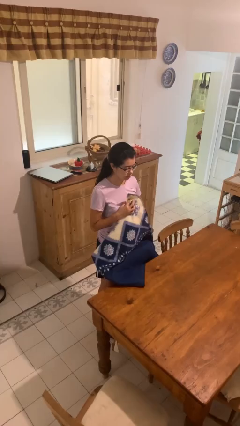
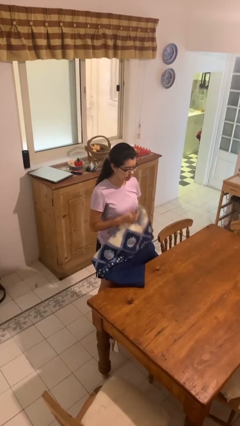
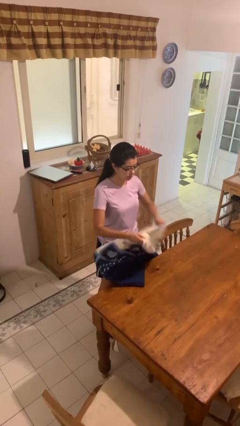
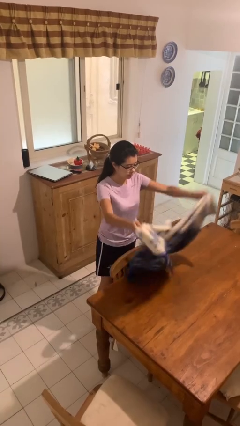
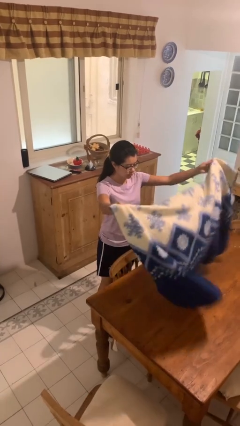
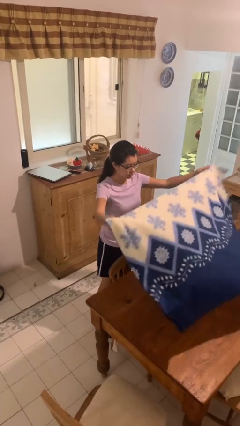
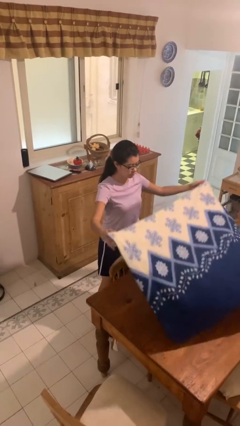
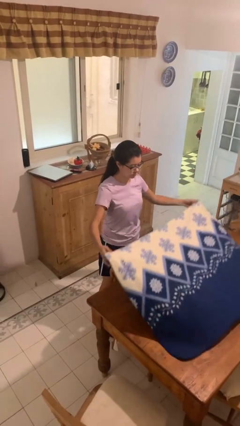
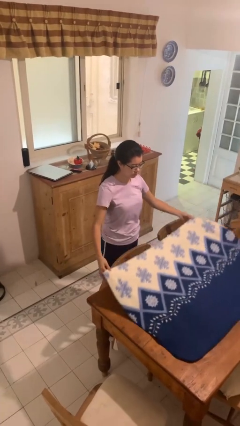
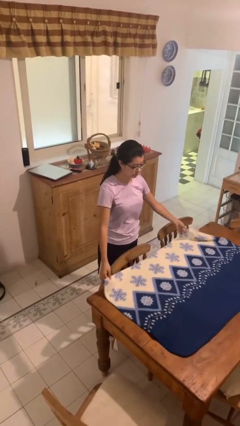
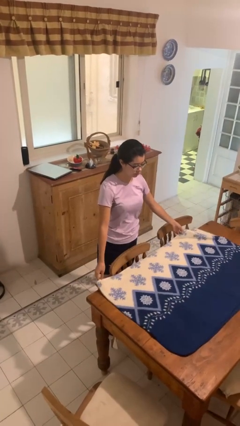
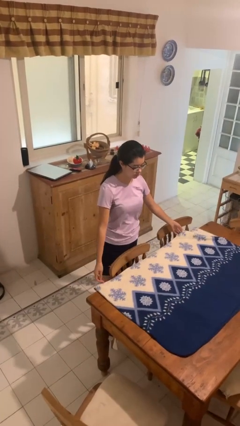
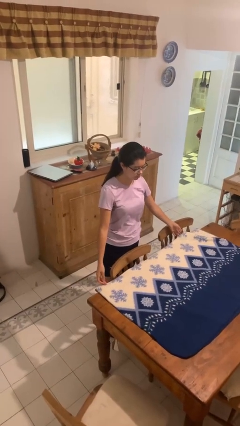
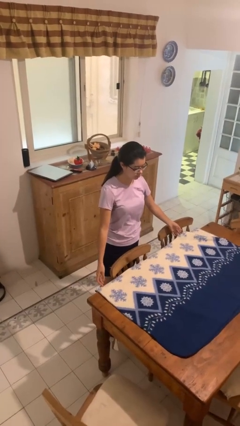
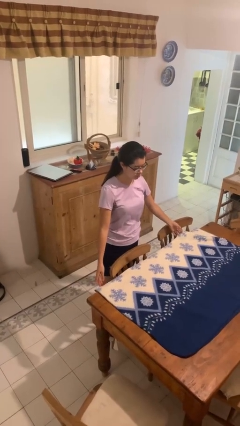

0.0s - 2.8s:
person spreads tablecloth

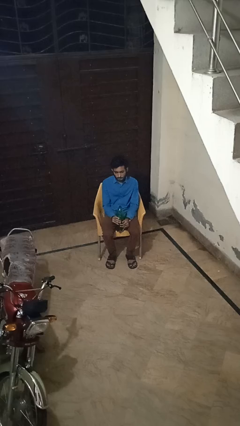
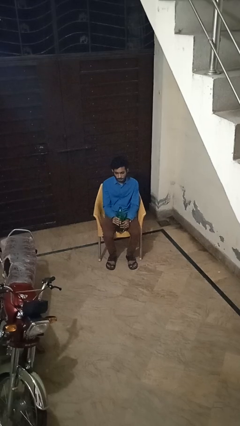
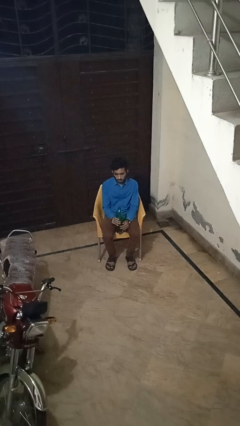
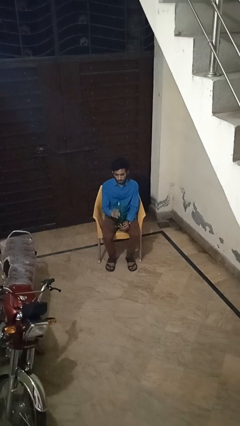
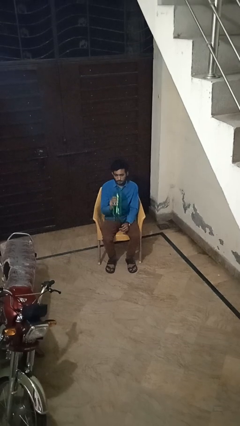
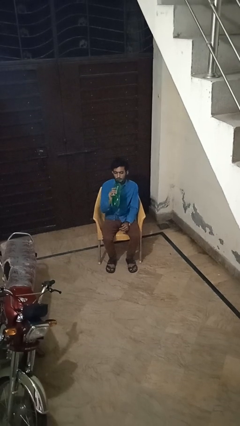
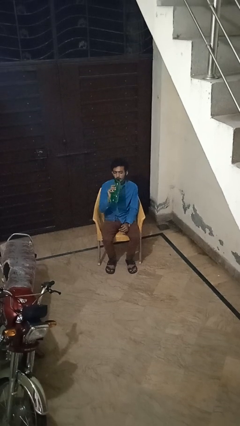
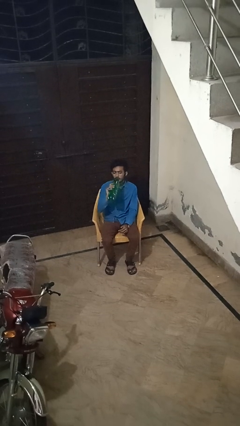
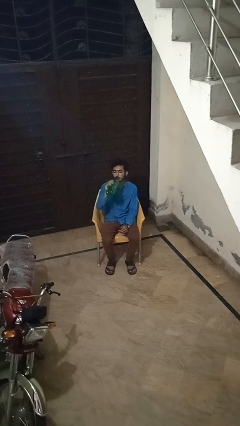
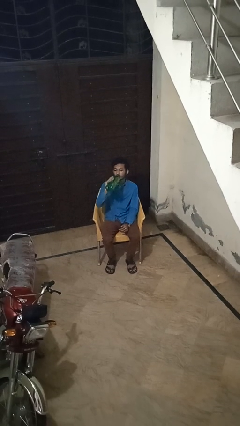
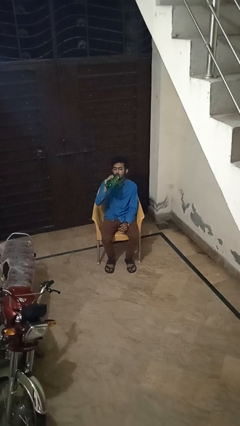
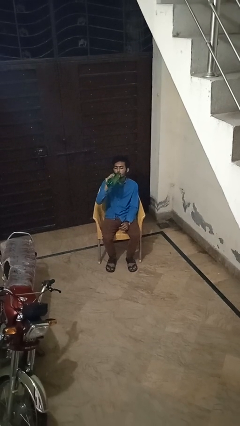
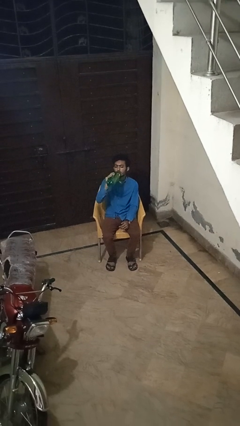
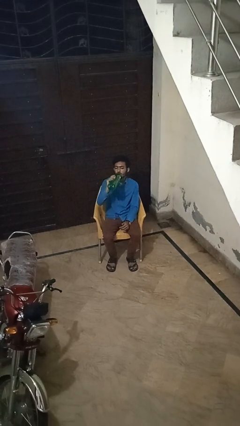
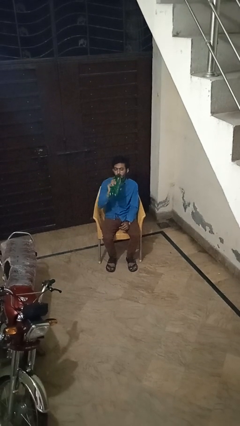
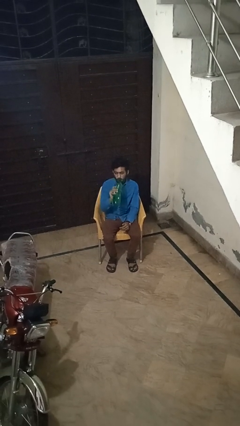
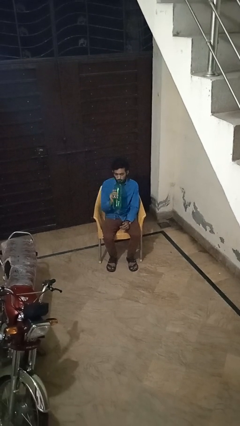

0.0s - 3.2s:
person drinks from bottle

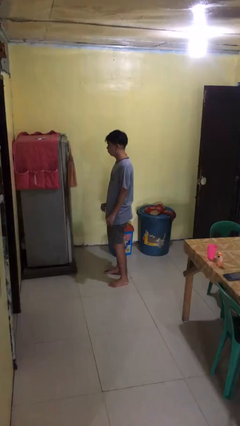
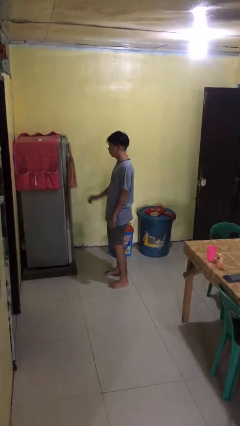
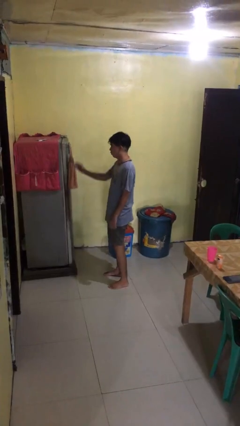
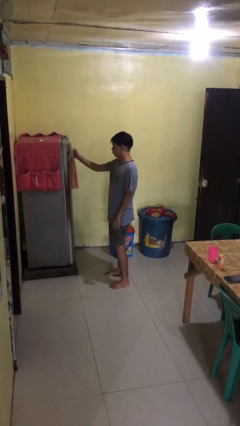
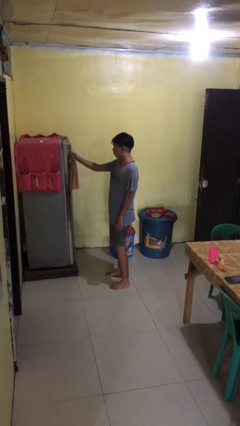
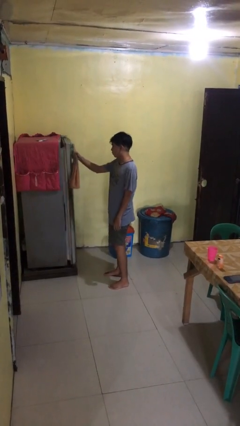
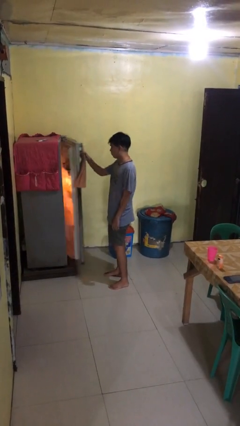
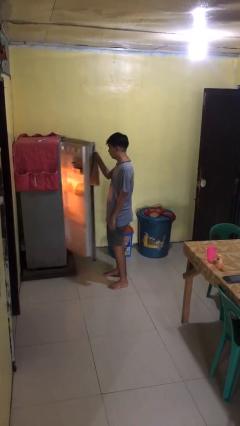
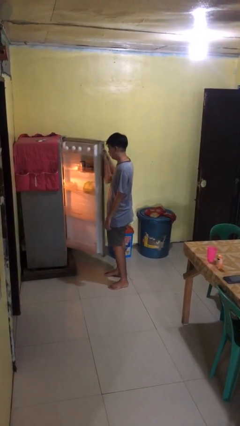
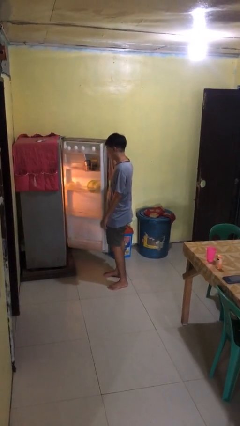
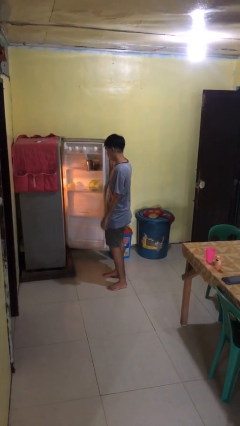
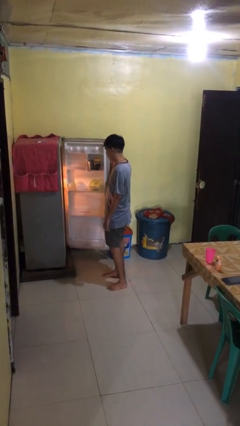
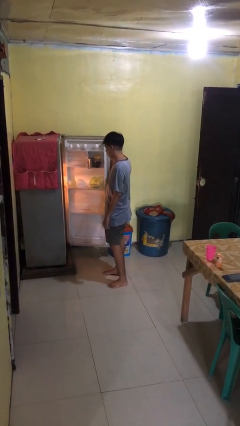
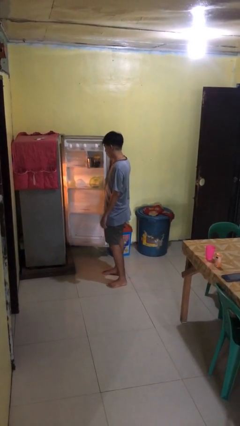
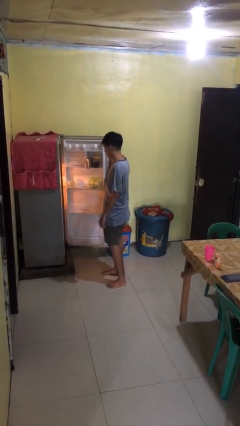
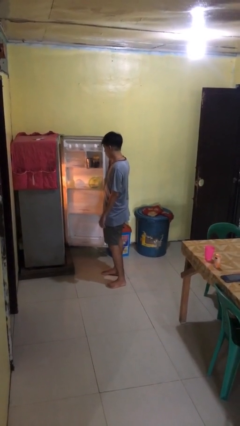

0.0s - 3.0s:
person opens refrigerator

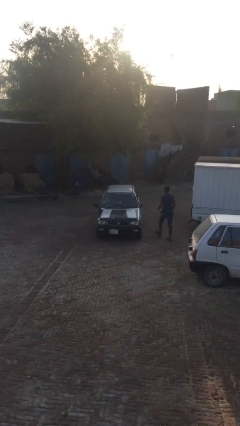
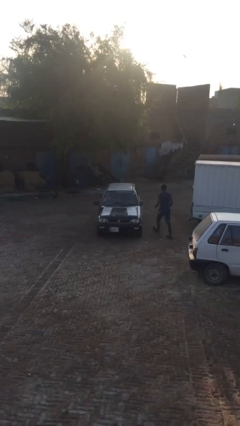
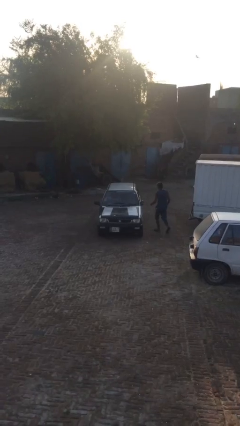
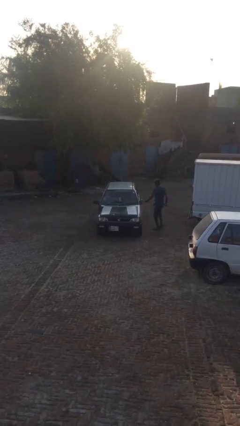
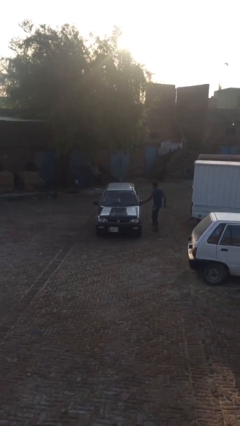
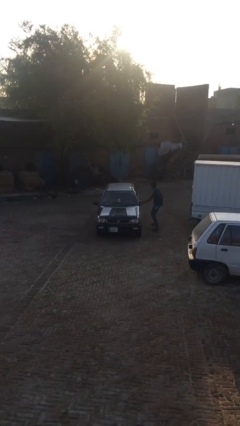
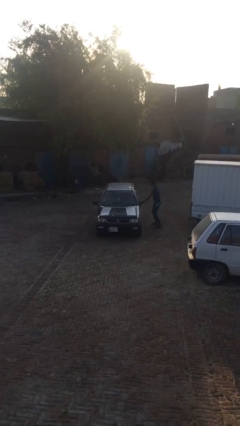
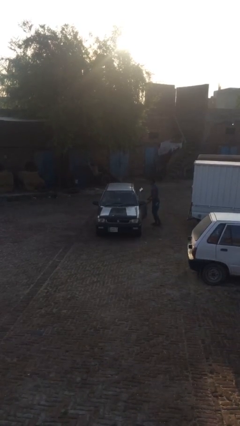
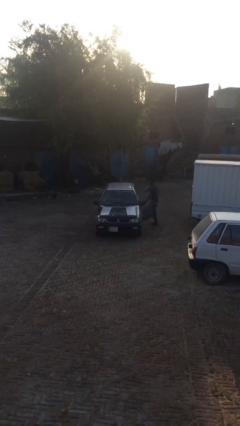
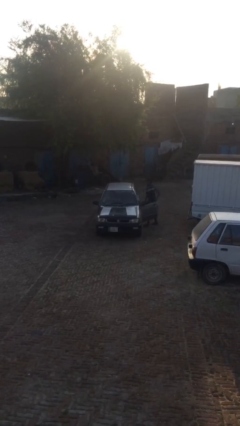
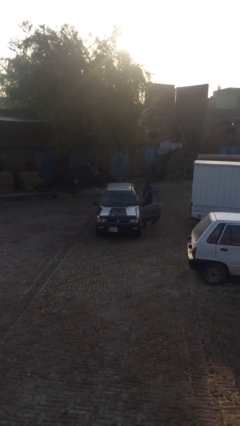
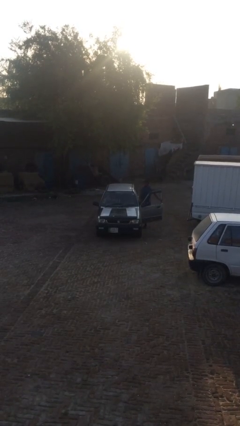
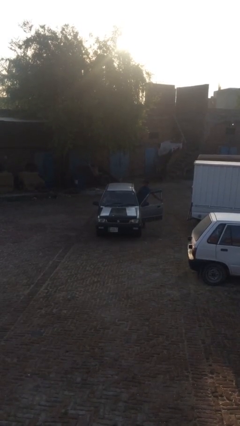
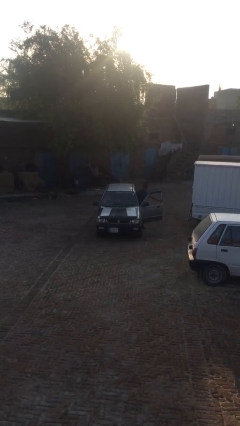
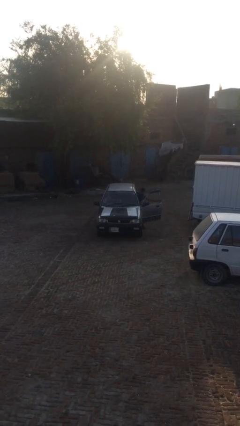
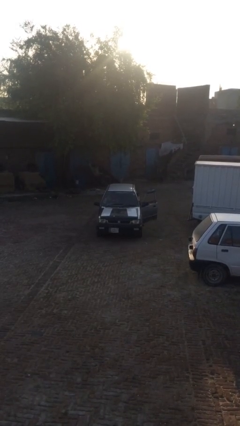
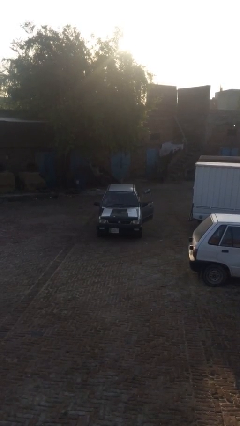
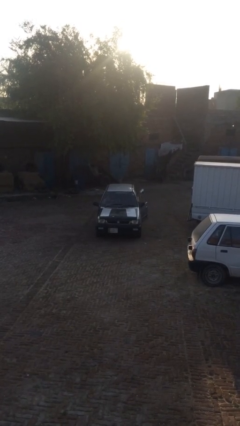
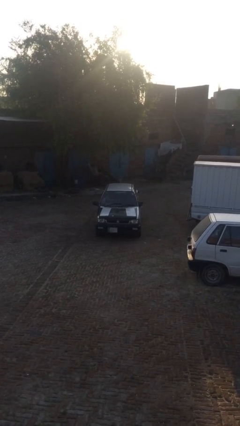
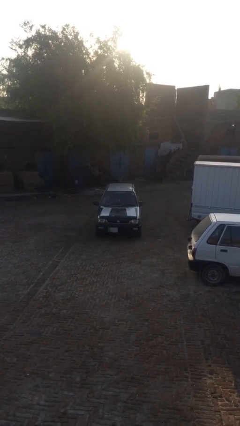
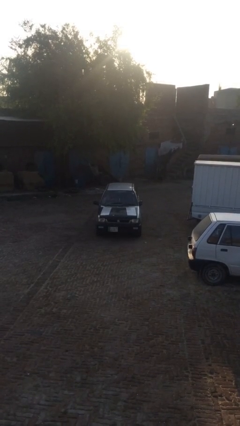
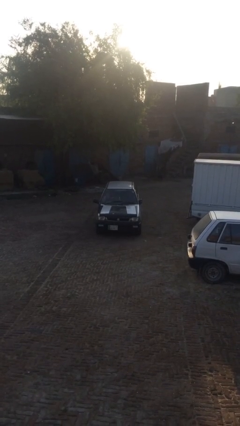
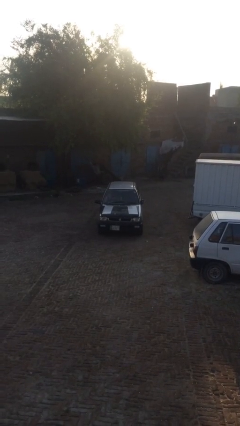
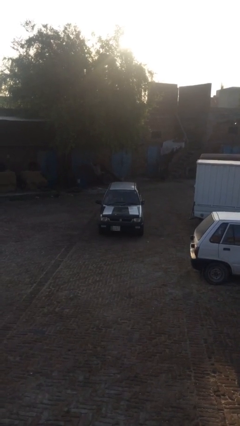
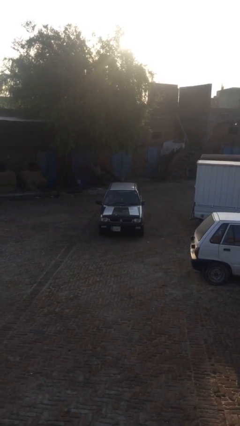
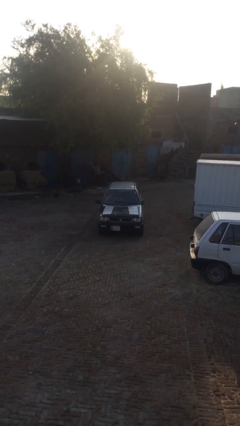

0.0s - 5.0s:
car picks up person

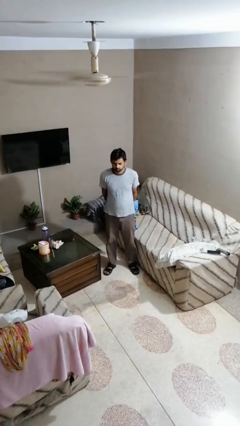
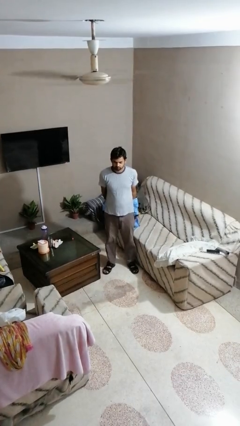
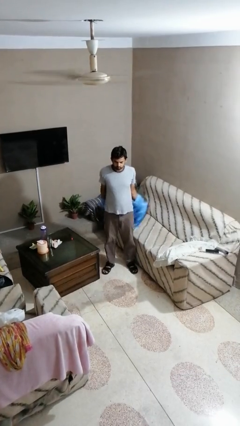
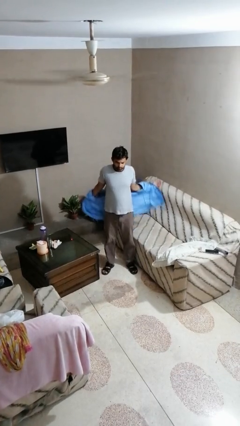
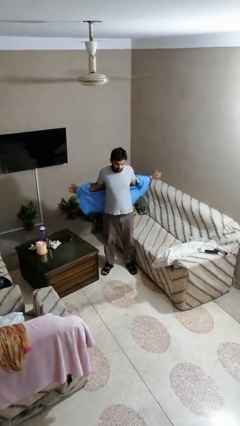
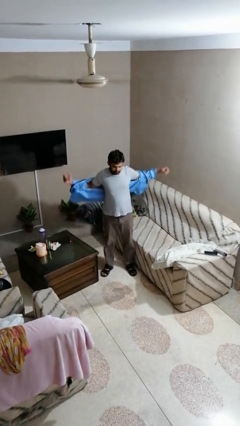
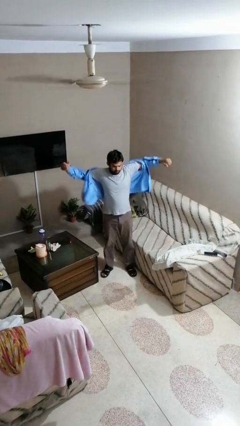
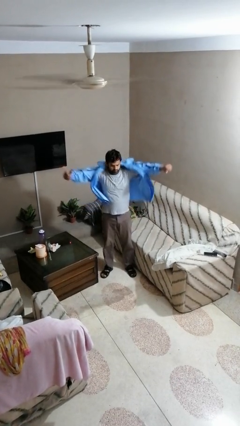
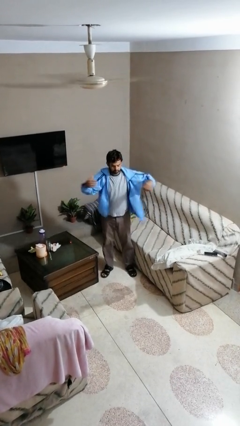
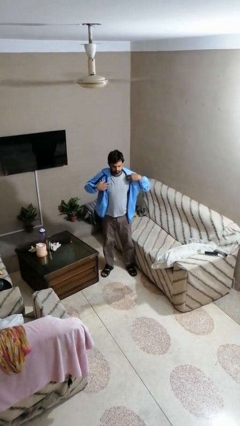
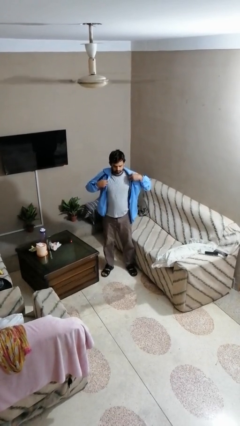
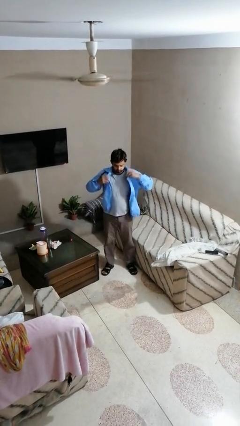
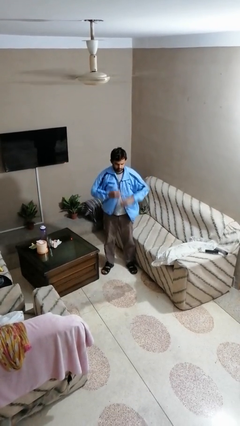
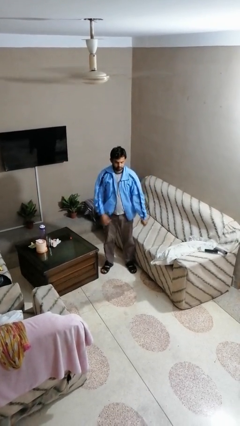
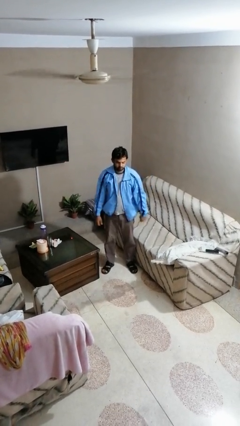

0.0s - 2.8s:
person puts on jacket

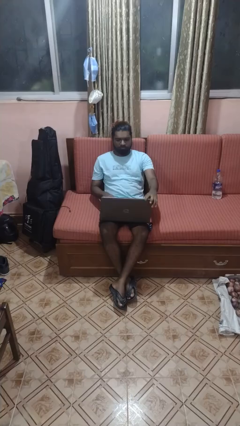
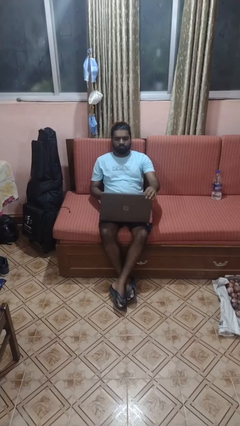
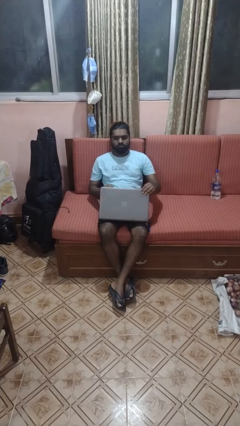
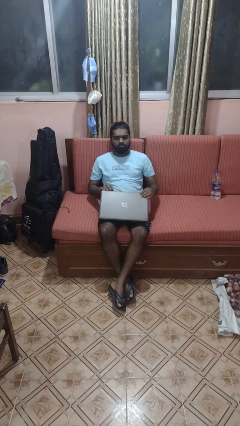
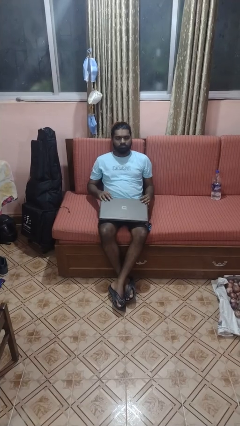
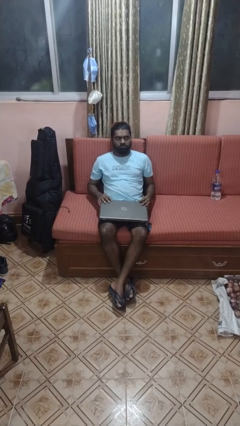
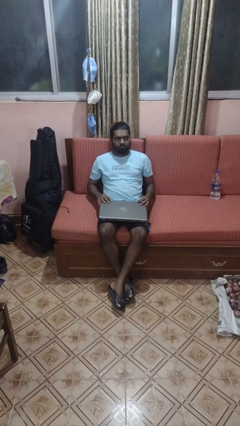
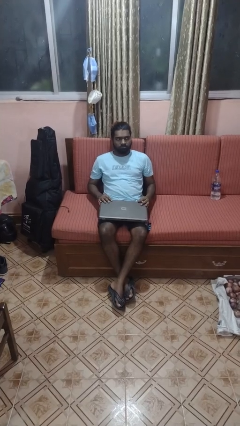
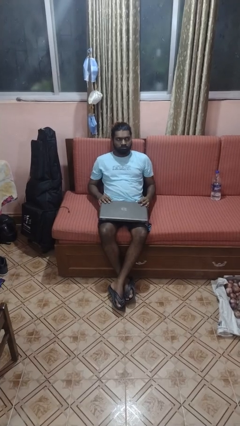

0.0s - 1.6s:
person closes laptop
